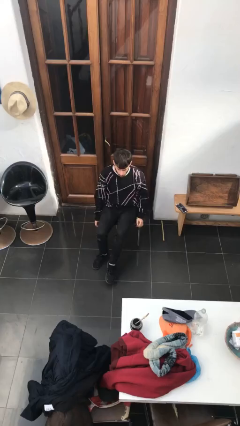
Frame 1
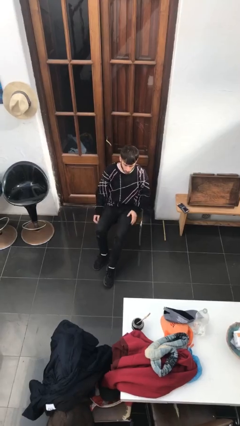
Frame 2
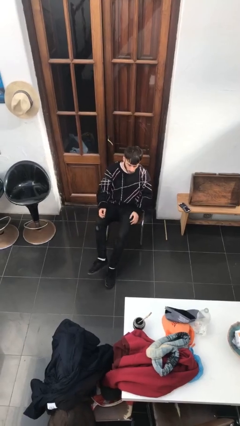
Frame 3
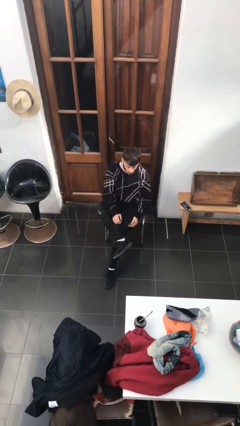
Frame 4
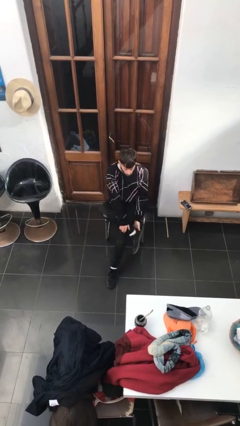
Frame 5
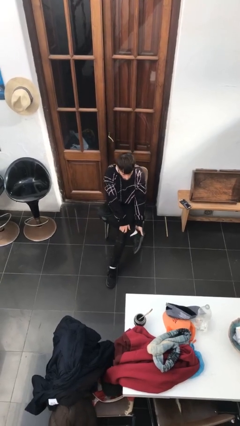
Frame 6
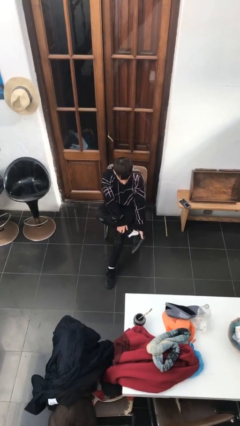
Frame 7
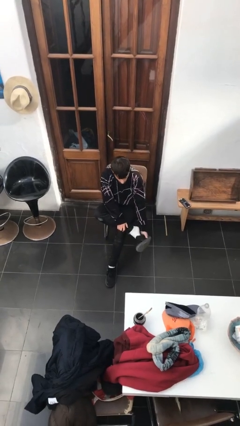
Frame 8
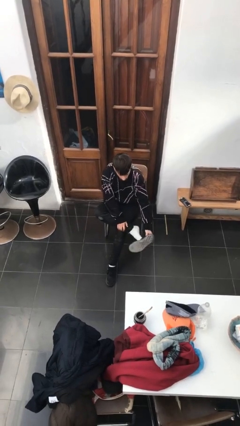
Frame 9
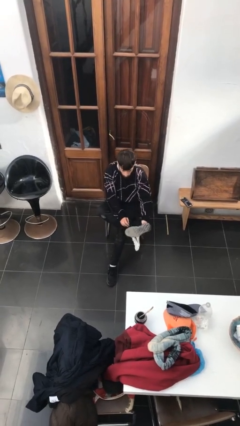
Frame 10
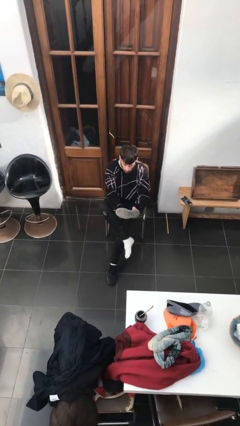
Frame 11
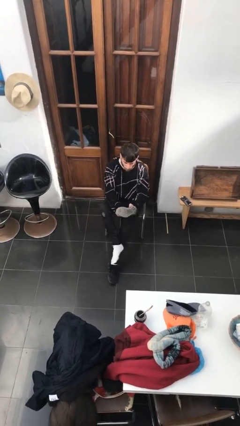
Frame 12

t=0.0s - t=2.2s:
person takes off shoes

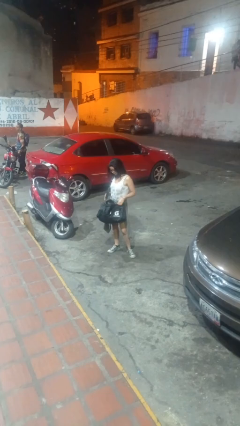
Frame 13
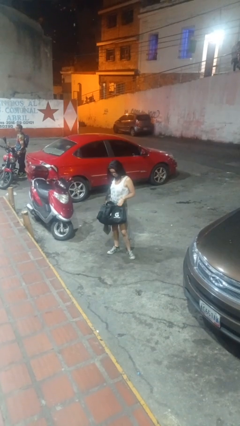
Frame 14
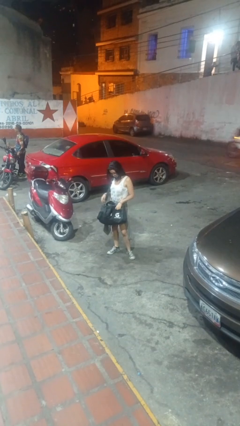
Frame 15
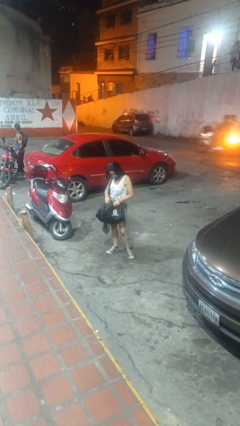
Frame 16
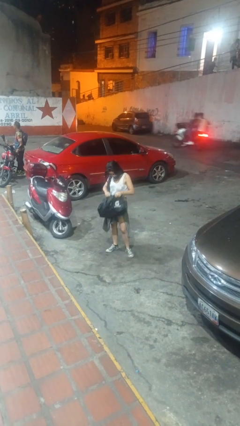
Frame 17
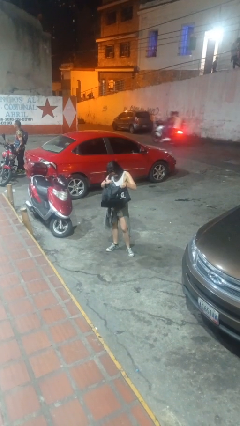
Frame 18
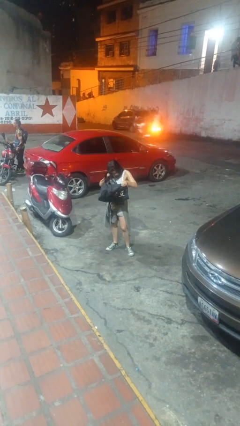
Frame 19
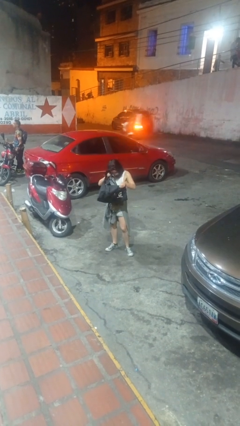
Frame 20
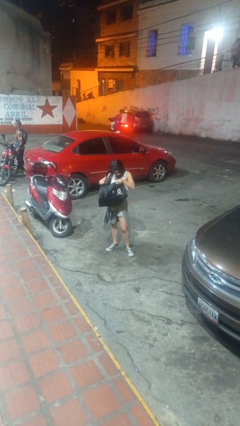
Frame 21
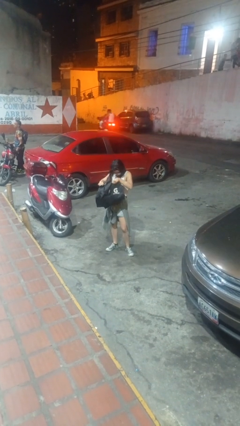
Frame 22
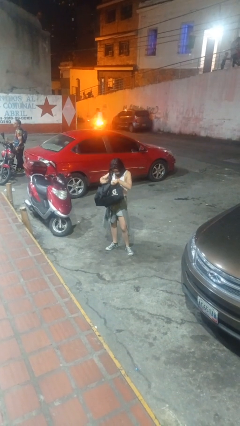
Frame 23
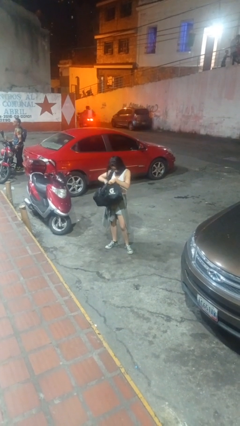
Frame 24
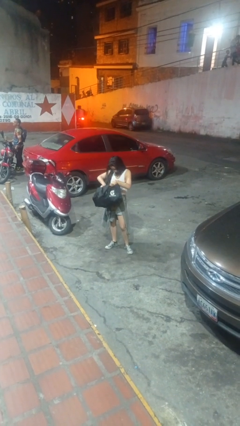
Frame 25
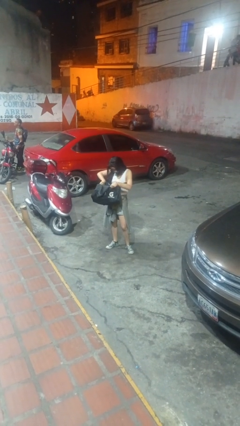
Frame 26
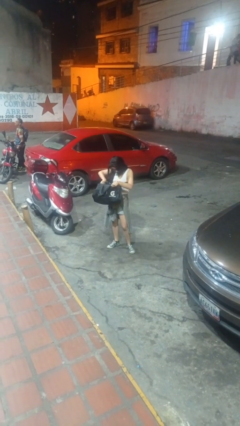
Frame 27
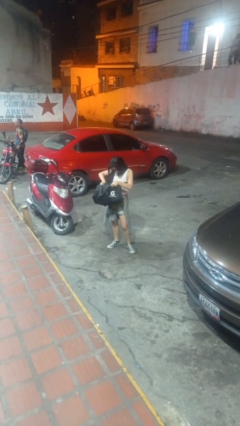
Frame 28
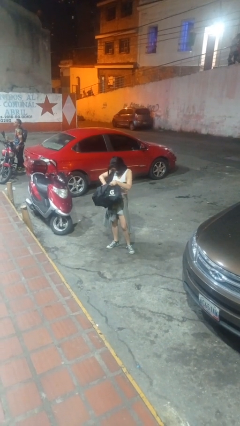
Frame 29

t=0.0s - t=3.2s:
person searches in purse

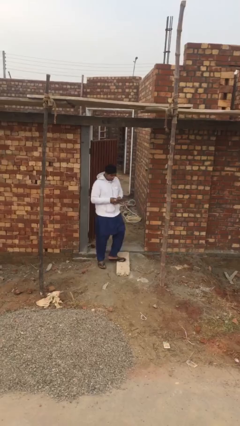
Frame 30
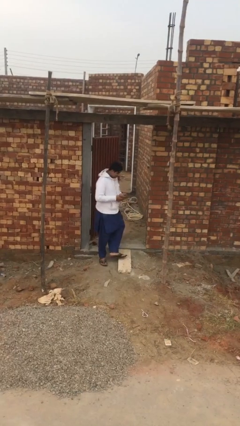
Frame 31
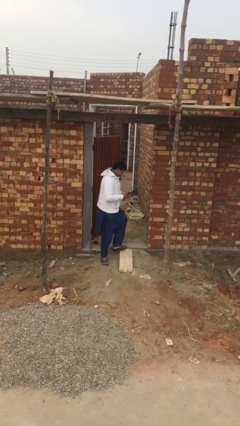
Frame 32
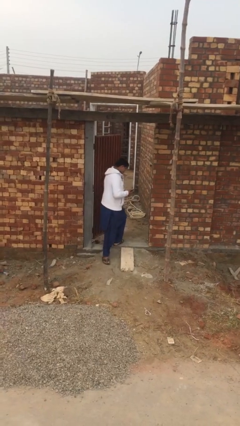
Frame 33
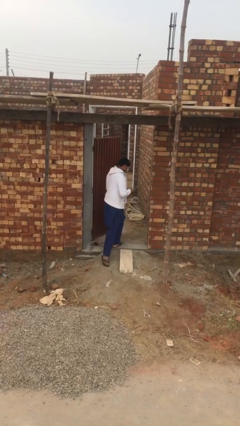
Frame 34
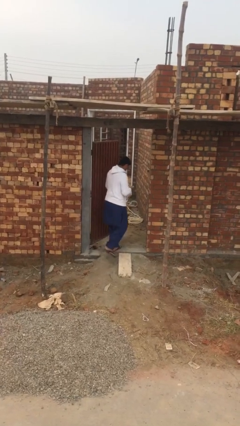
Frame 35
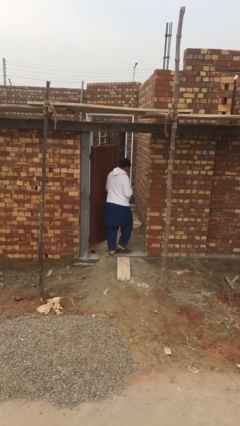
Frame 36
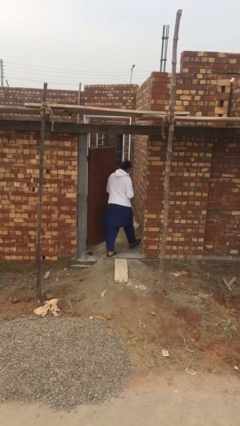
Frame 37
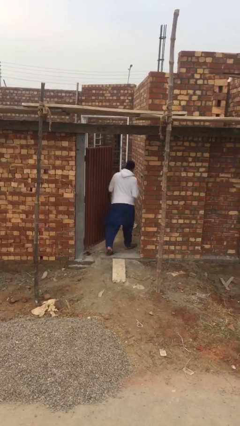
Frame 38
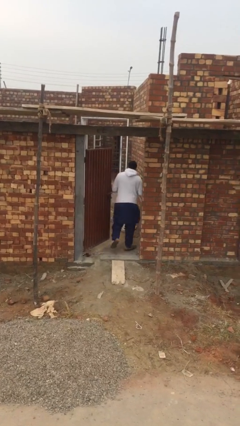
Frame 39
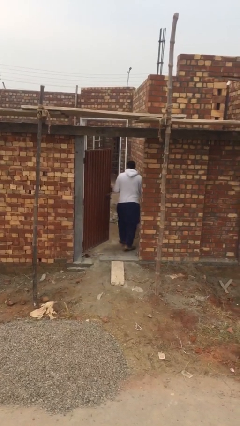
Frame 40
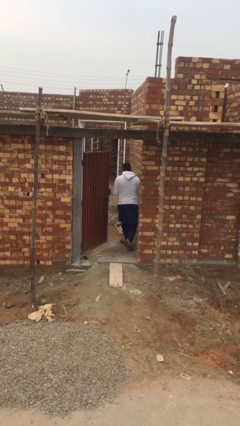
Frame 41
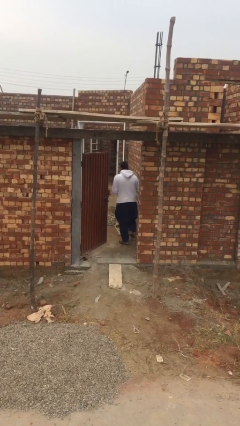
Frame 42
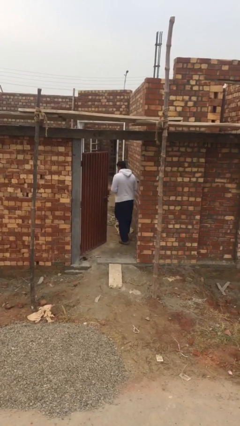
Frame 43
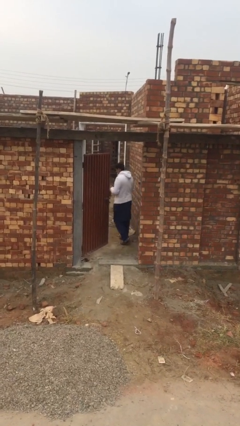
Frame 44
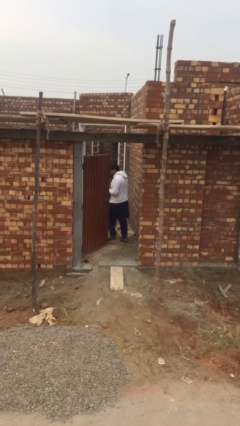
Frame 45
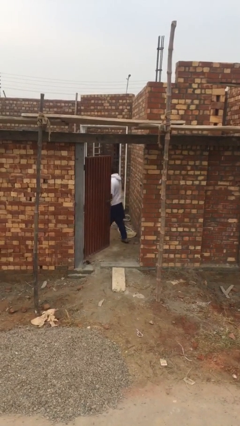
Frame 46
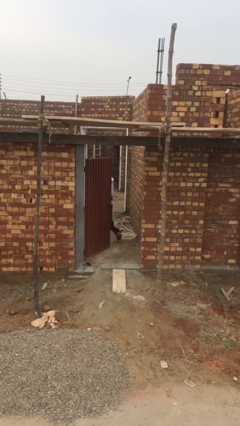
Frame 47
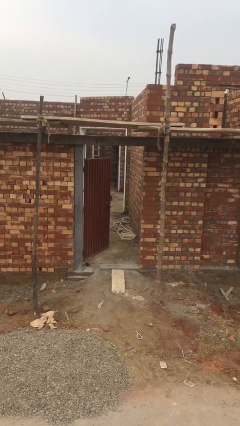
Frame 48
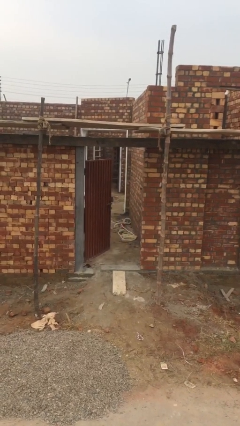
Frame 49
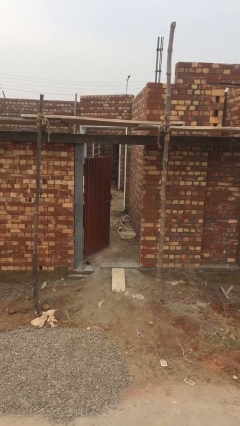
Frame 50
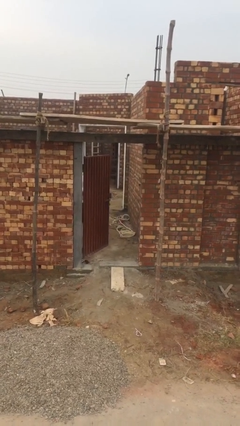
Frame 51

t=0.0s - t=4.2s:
person exits scene through structure

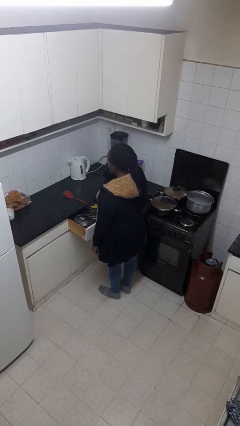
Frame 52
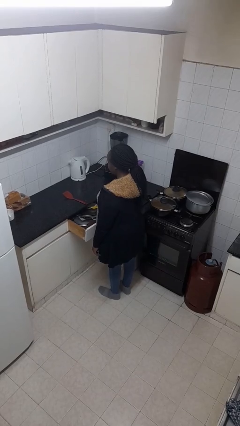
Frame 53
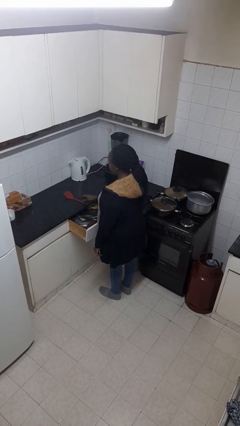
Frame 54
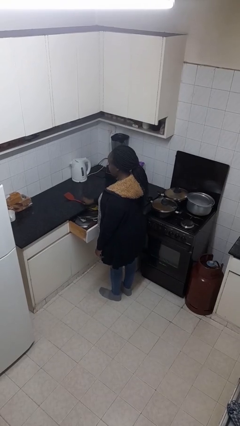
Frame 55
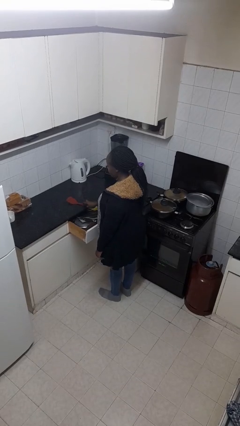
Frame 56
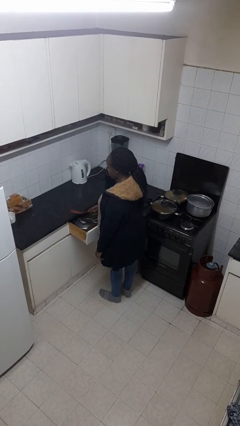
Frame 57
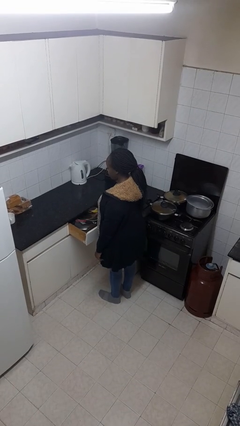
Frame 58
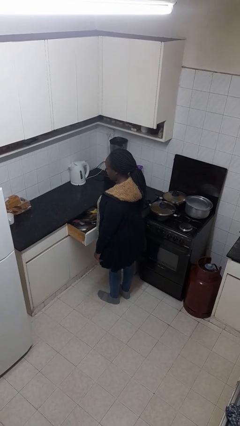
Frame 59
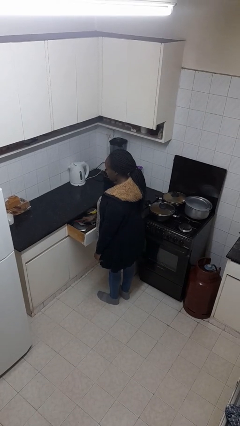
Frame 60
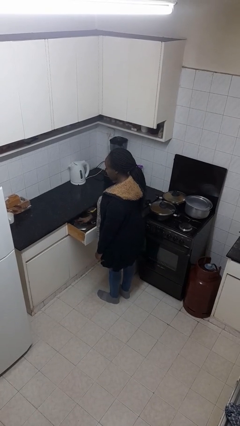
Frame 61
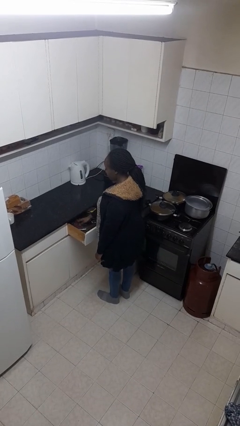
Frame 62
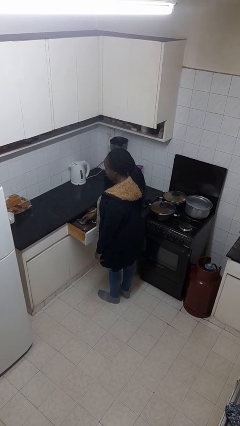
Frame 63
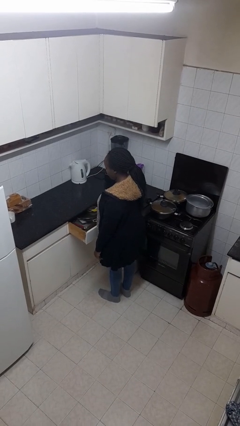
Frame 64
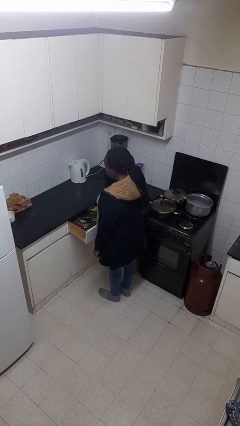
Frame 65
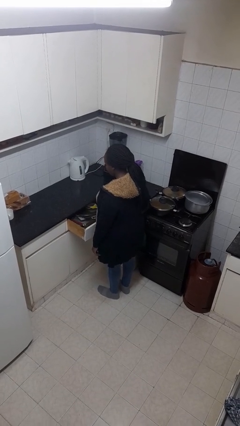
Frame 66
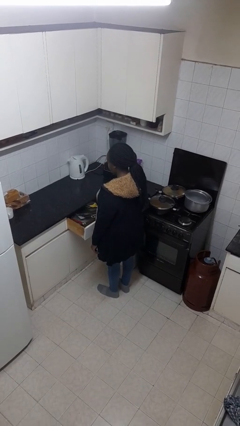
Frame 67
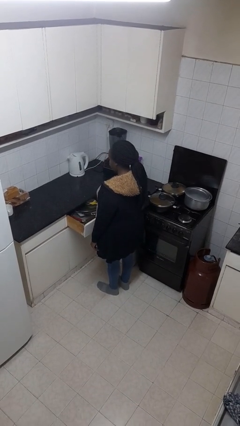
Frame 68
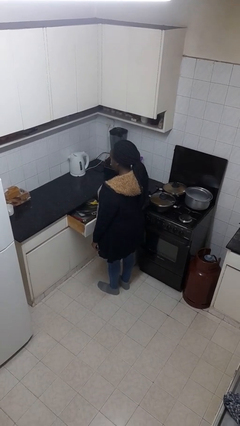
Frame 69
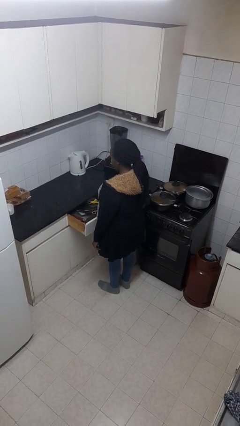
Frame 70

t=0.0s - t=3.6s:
person puts object into kitchen drawer

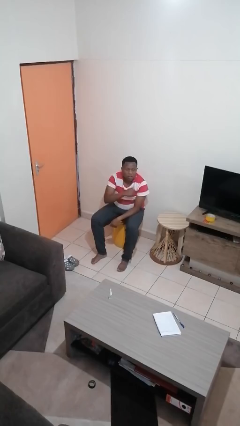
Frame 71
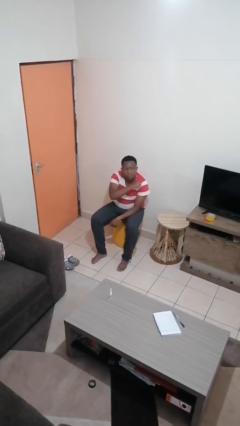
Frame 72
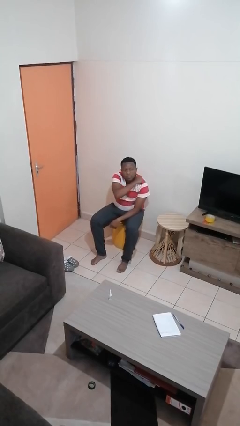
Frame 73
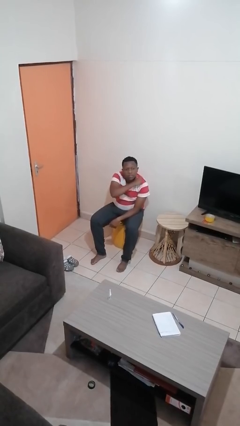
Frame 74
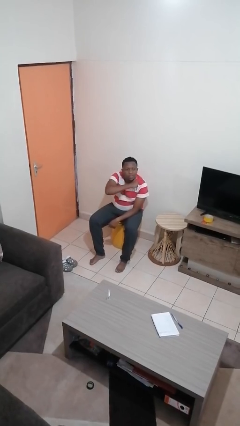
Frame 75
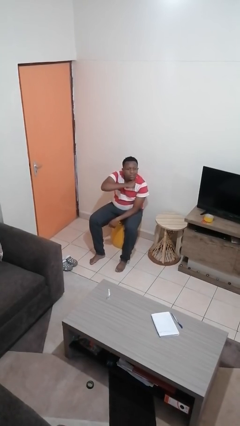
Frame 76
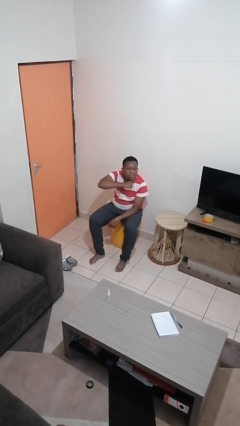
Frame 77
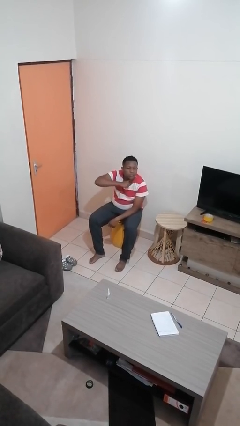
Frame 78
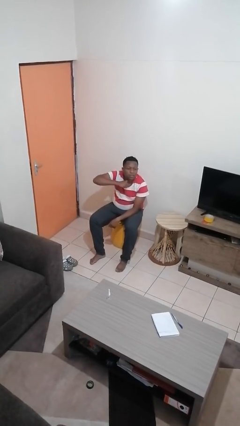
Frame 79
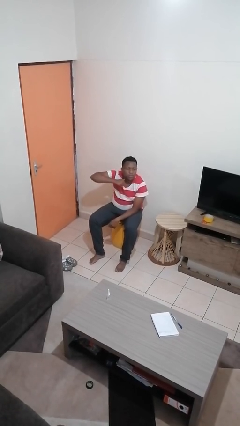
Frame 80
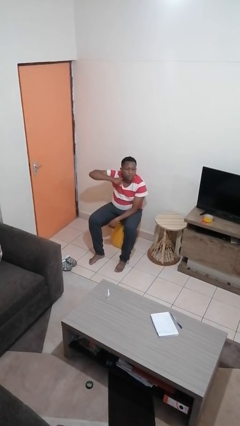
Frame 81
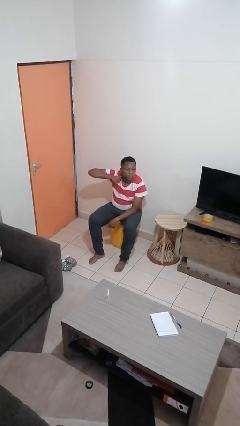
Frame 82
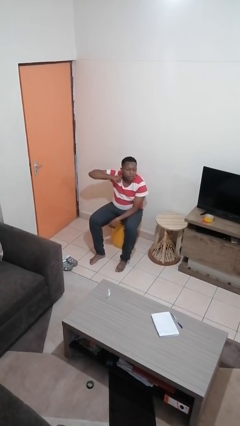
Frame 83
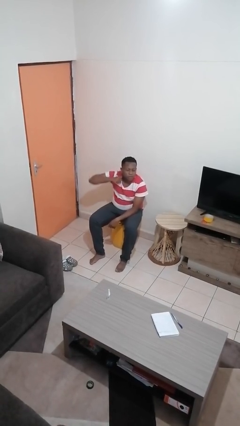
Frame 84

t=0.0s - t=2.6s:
person gestures cut

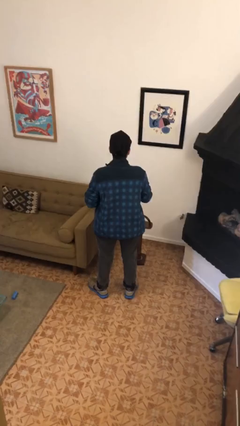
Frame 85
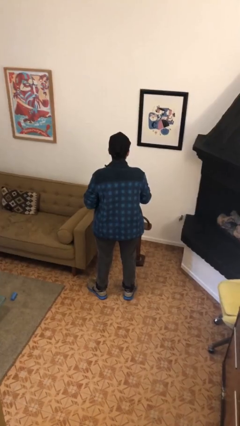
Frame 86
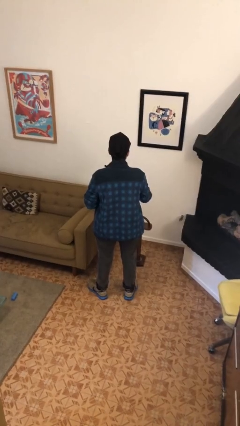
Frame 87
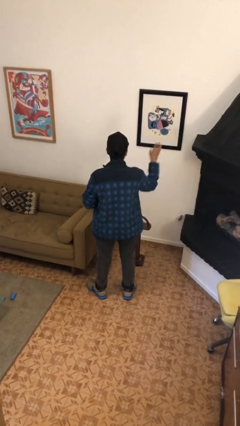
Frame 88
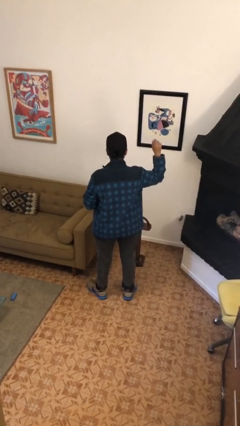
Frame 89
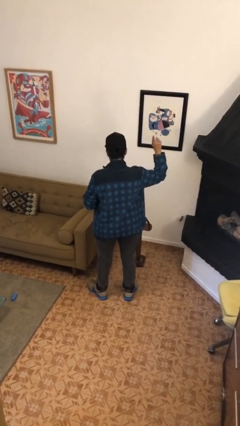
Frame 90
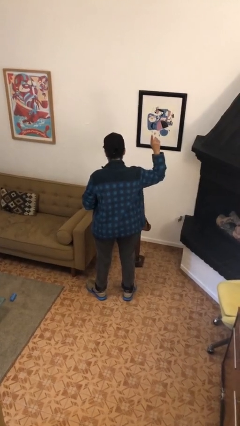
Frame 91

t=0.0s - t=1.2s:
person gestures raise hand

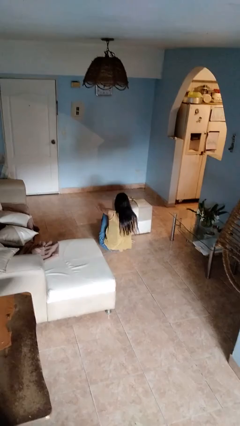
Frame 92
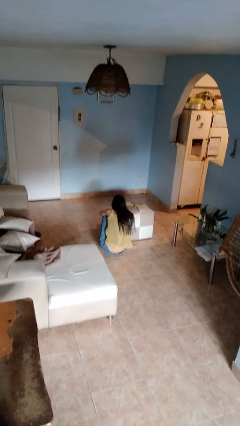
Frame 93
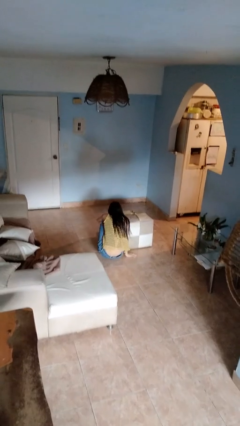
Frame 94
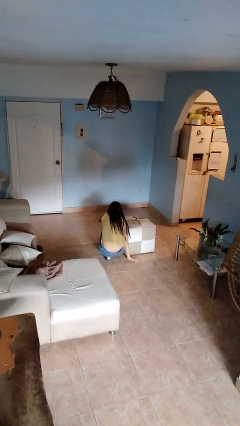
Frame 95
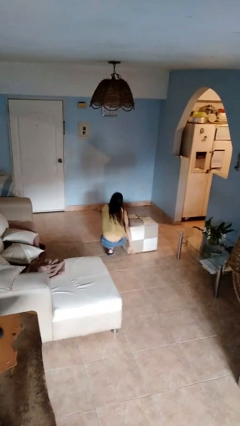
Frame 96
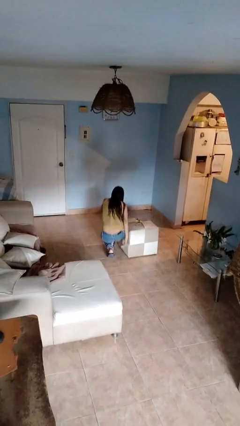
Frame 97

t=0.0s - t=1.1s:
person stands up from floor
